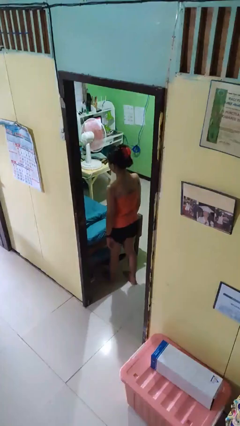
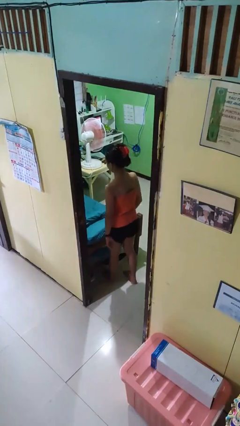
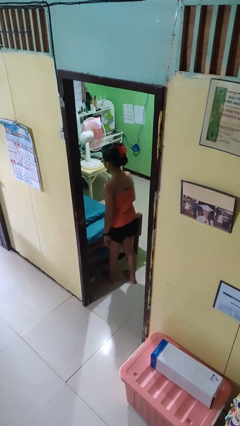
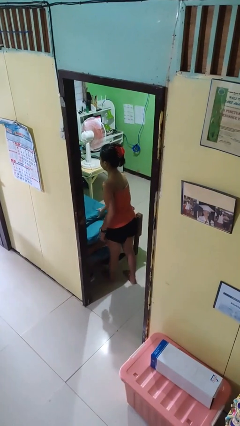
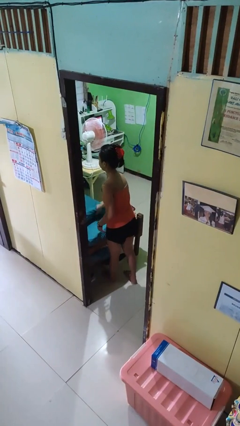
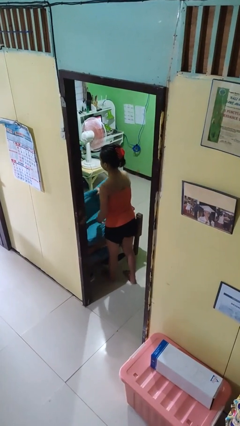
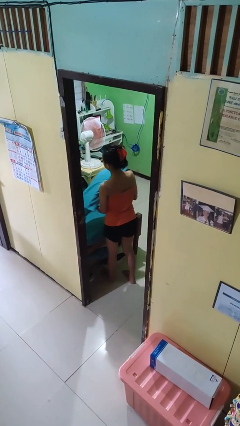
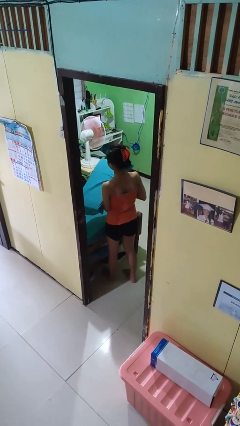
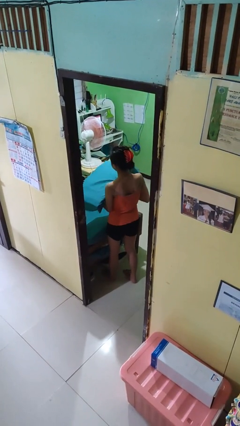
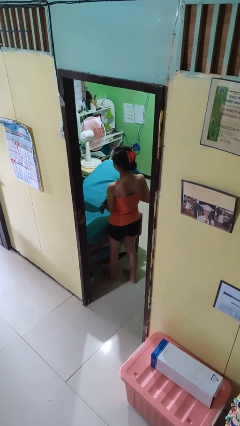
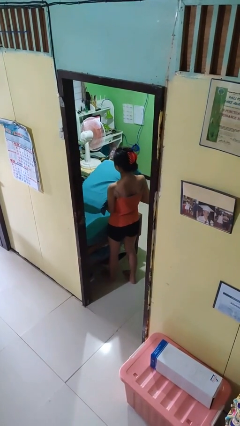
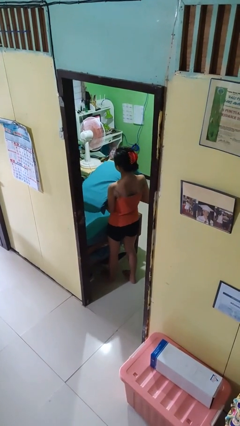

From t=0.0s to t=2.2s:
person picks up object from bed

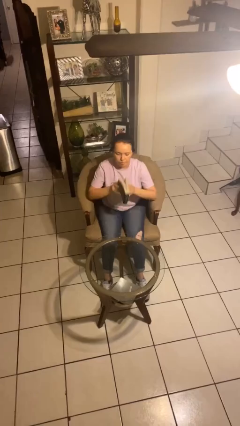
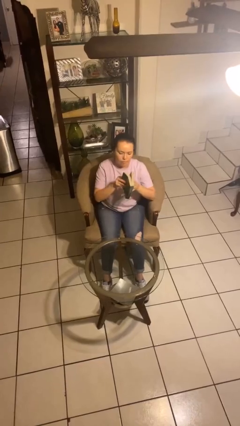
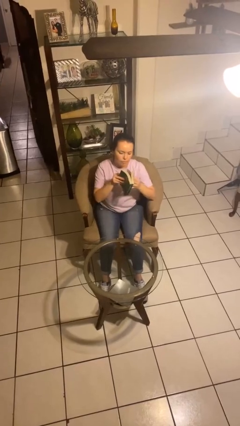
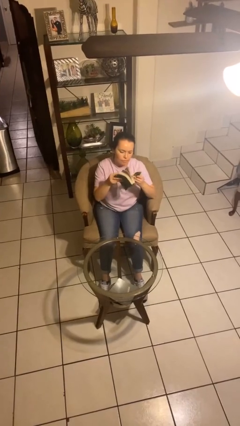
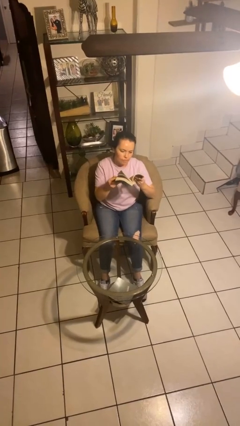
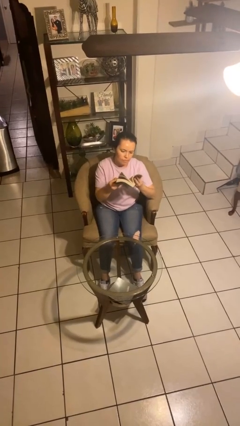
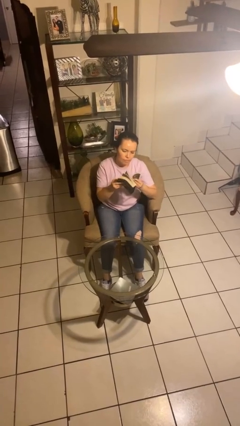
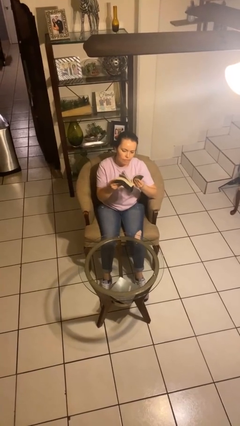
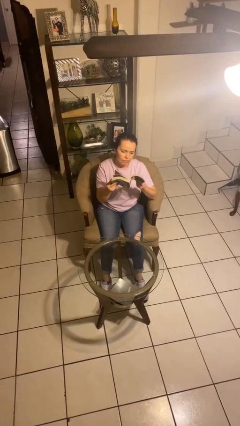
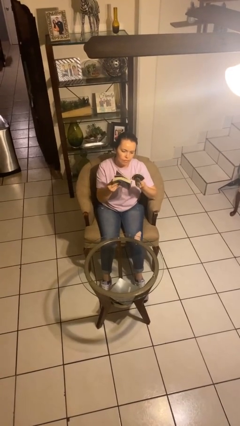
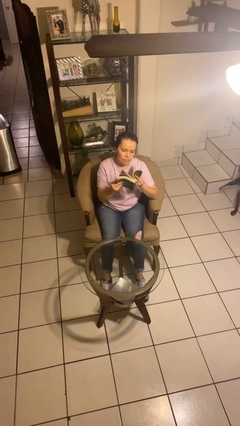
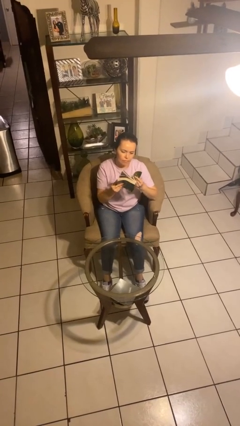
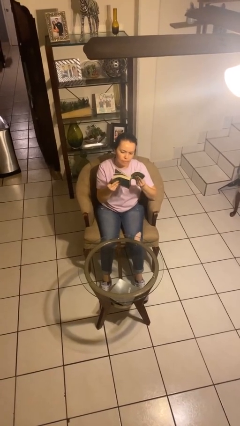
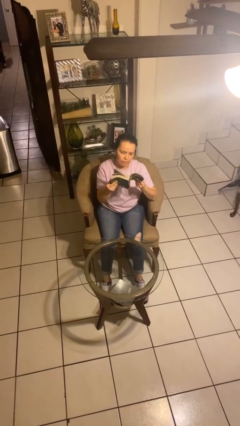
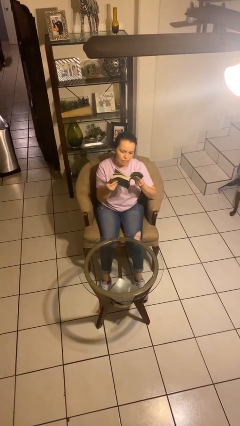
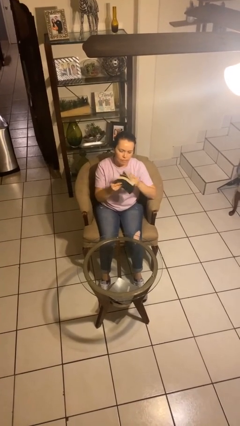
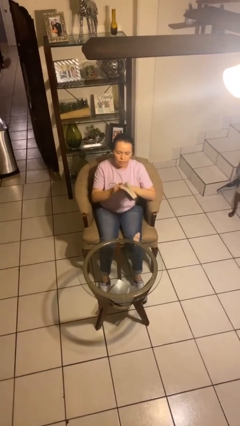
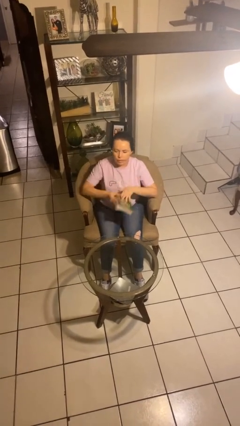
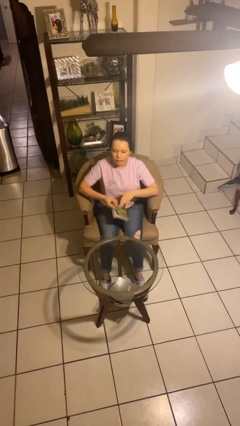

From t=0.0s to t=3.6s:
person reads book

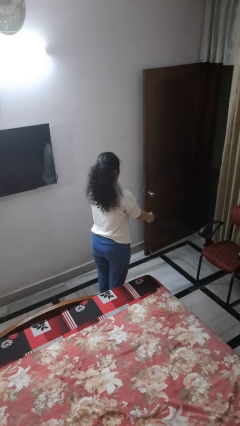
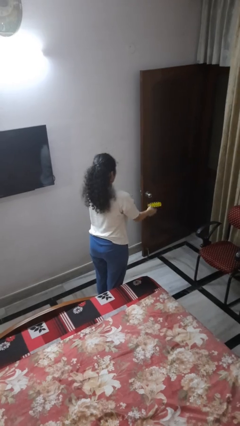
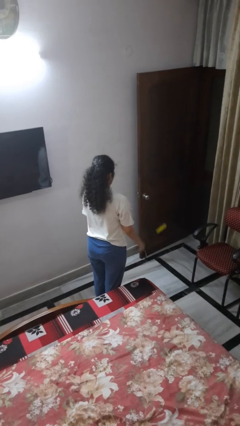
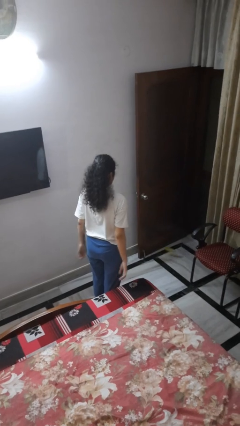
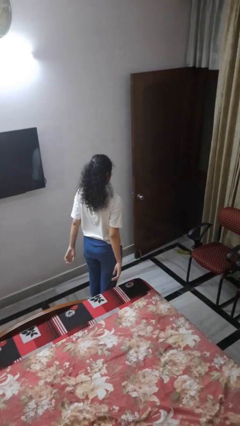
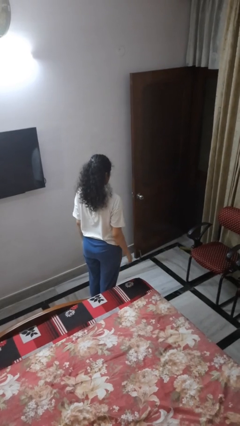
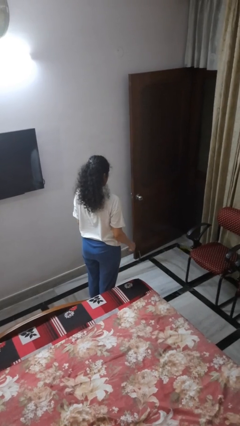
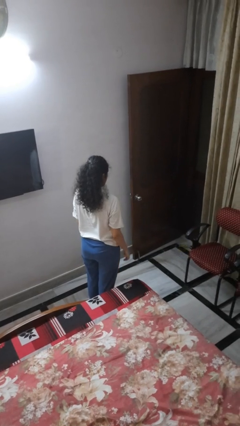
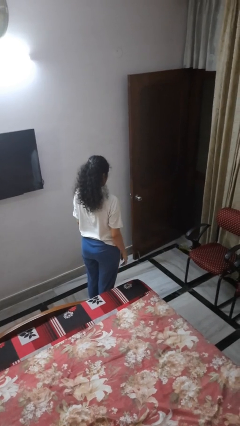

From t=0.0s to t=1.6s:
person throws object to ground

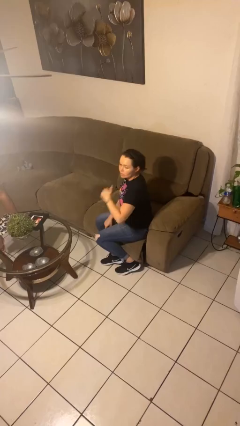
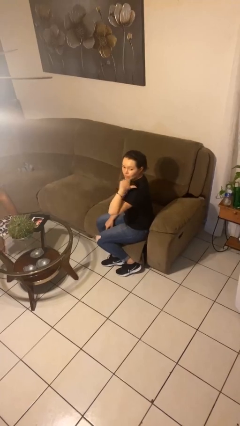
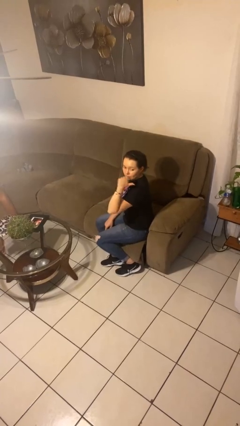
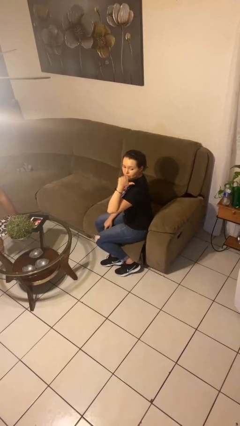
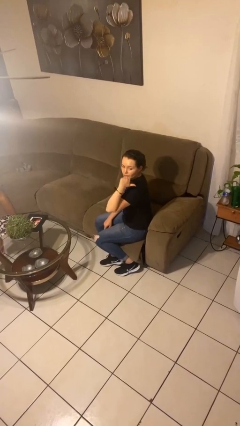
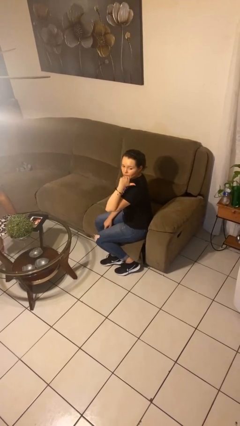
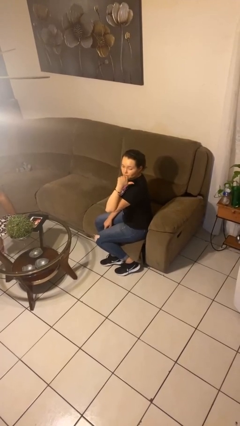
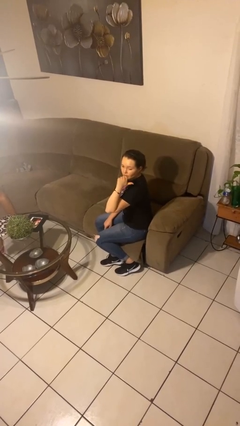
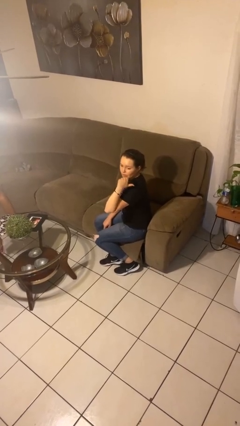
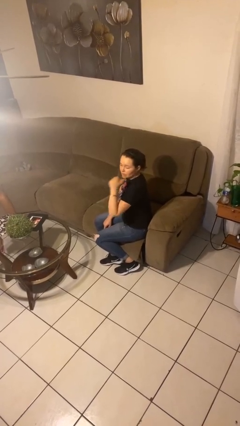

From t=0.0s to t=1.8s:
person gestures behind me

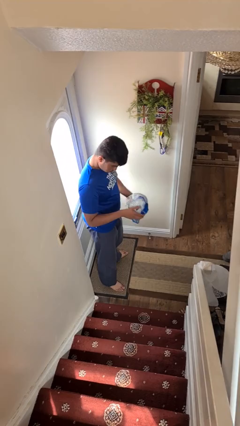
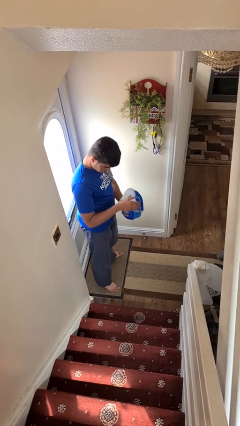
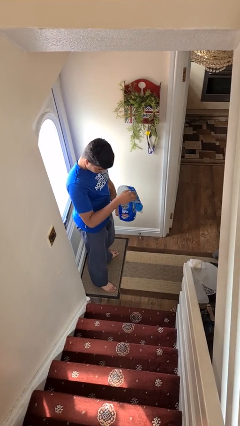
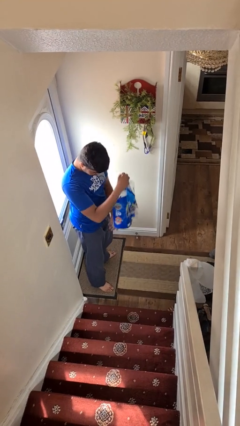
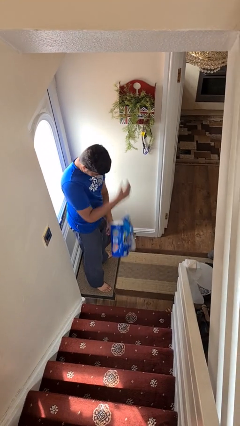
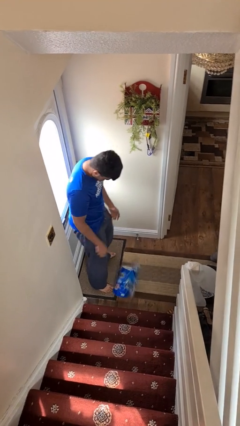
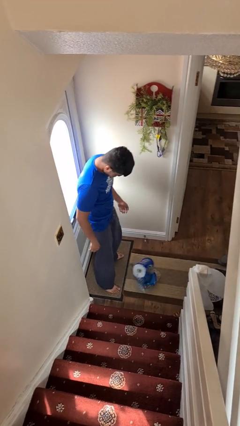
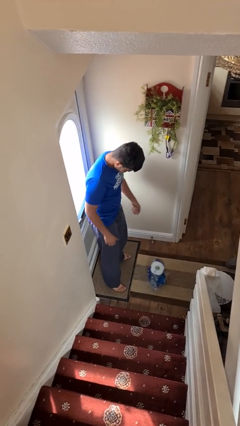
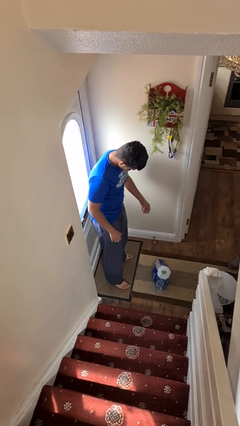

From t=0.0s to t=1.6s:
person drops object

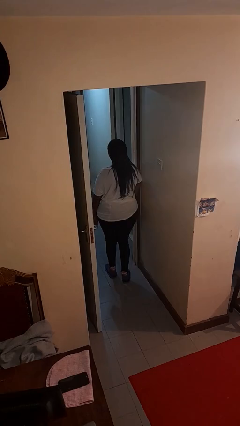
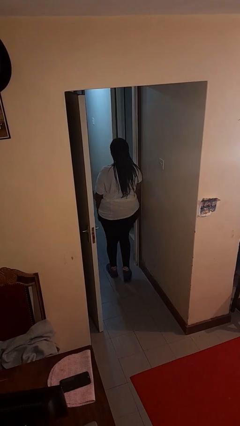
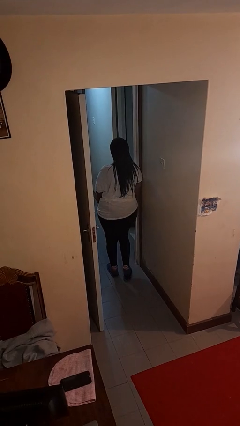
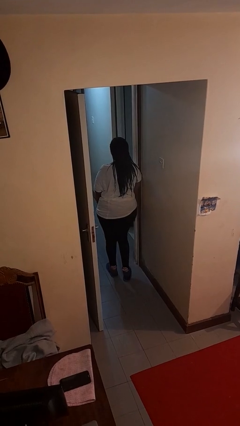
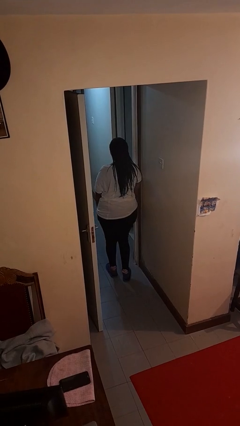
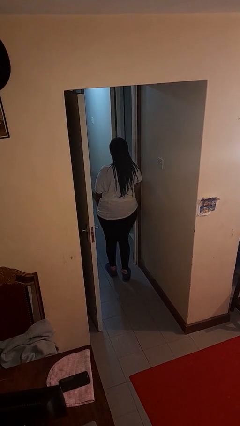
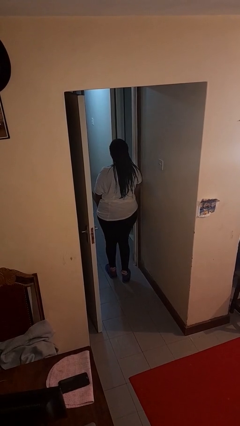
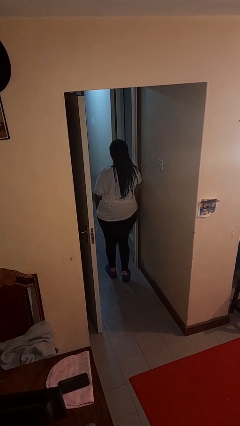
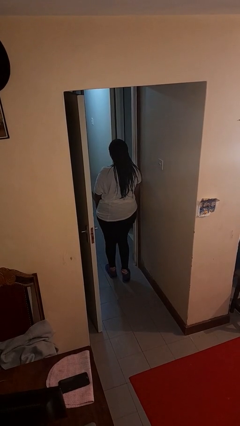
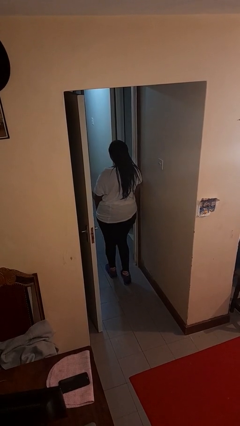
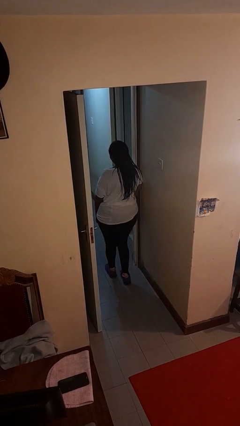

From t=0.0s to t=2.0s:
person bumps into wall

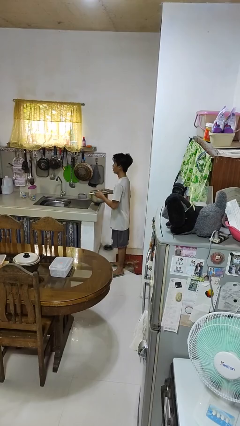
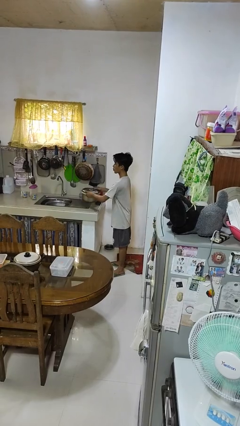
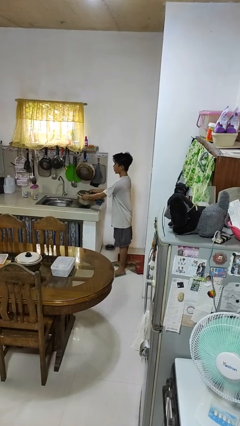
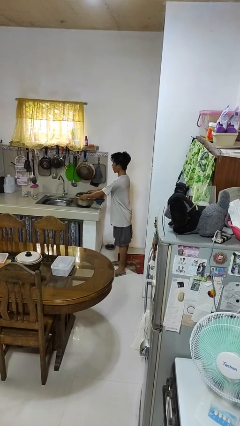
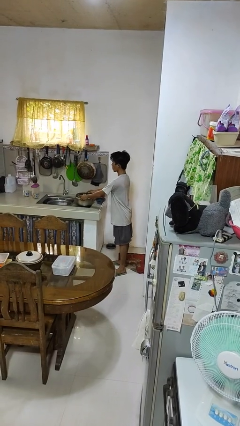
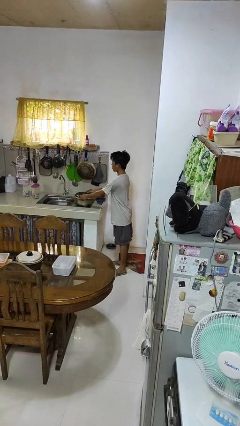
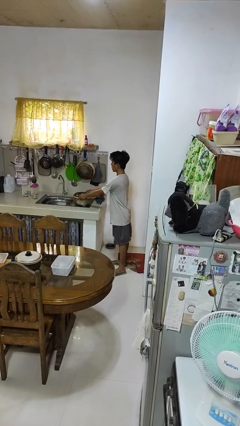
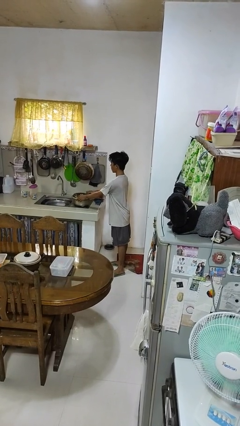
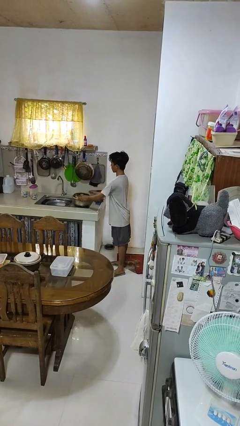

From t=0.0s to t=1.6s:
person puts down object on countertop

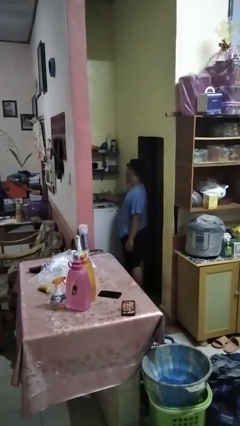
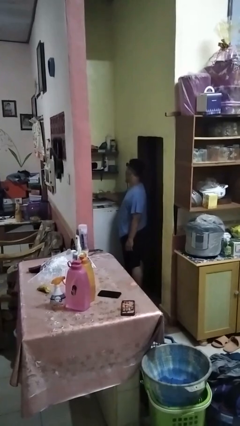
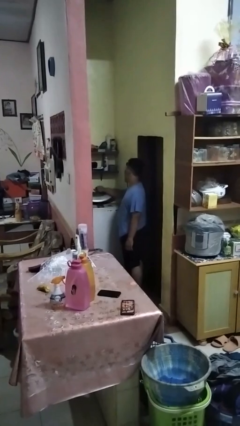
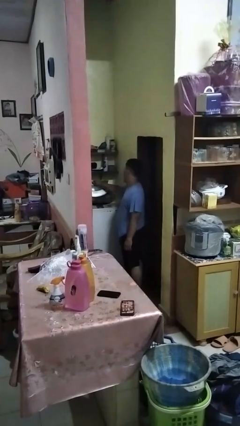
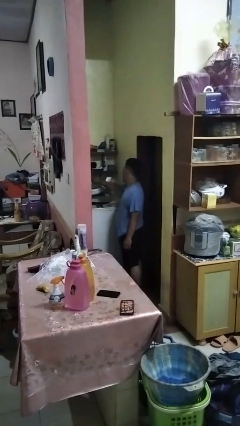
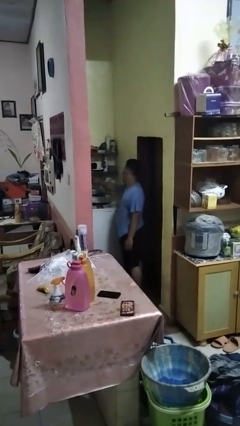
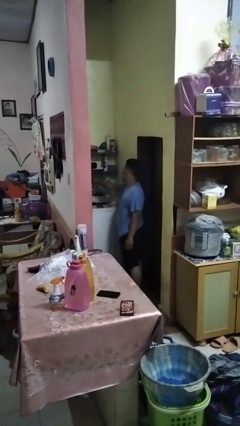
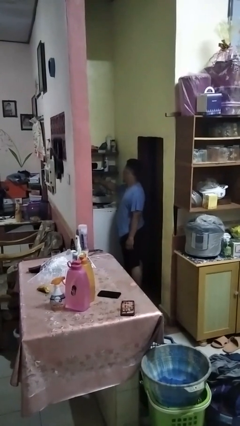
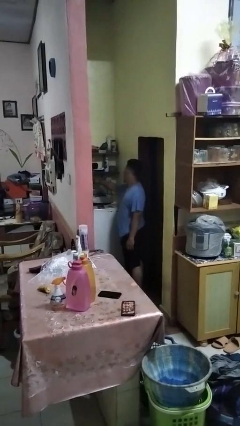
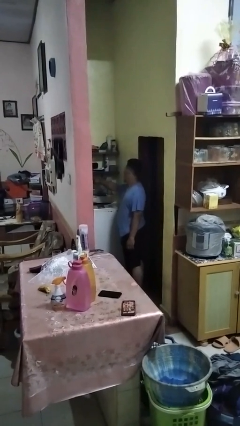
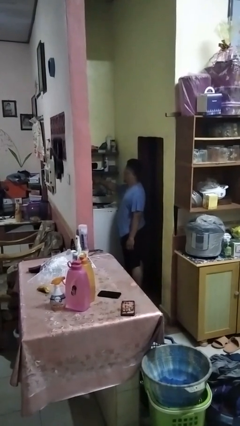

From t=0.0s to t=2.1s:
person opens clothes washer
